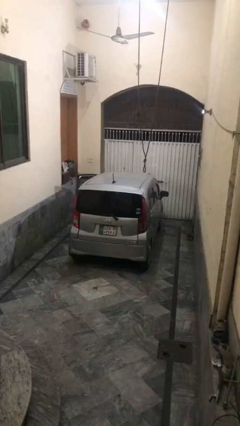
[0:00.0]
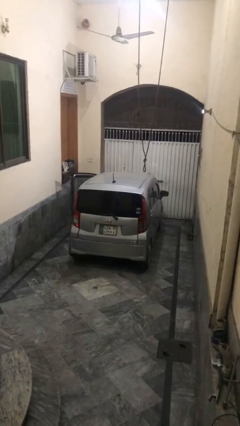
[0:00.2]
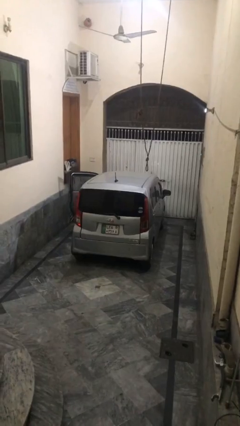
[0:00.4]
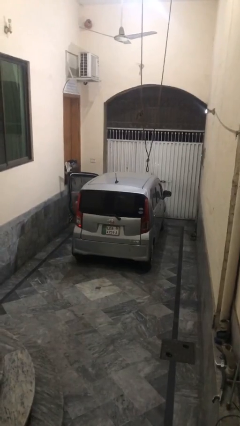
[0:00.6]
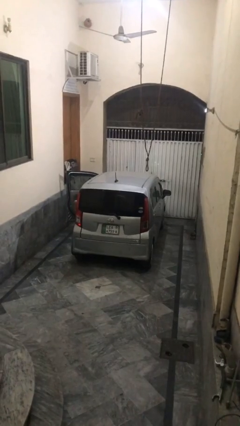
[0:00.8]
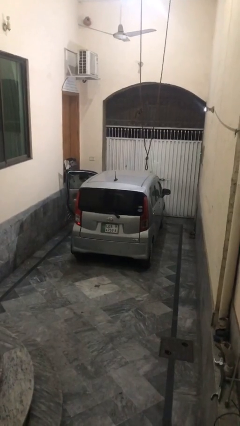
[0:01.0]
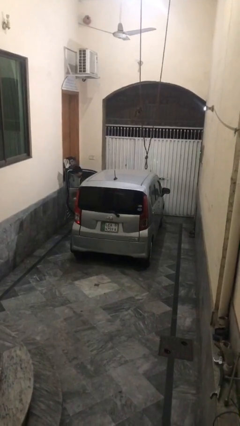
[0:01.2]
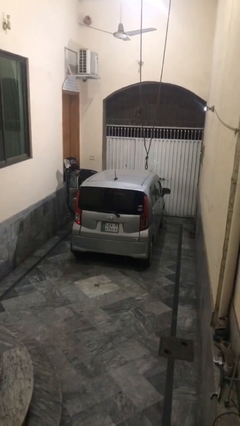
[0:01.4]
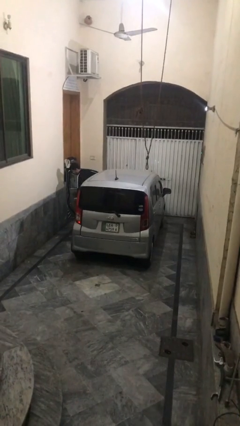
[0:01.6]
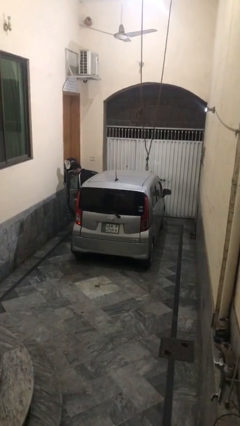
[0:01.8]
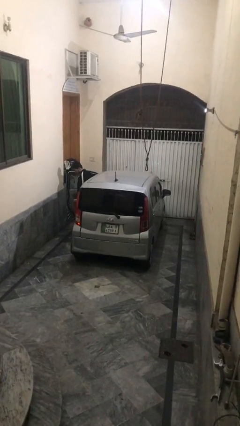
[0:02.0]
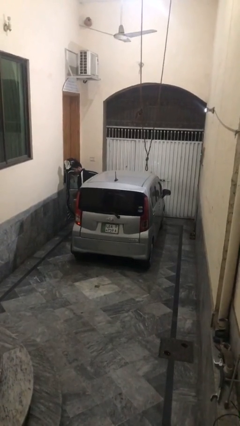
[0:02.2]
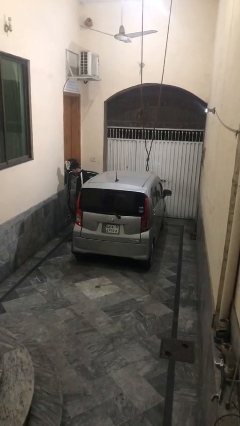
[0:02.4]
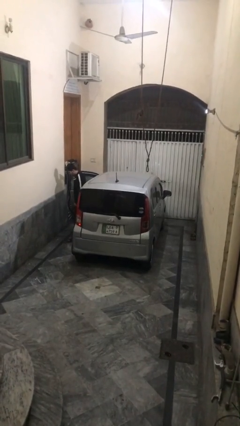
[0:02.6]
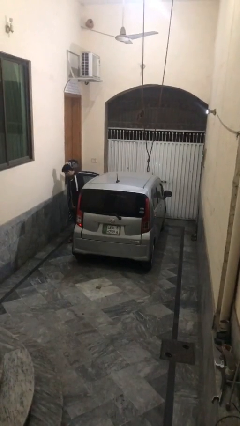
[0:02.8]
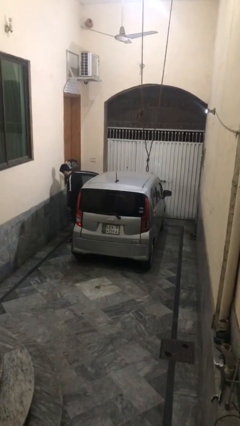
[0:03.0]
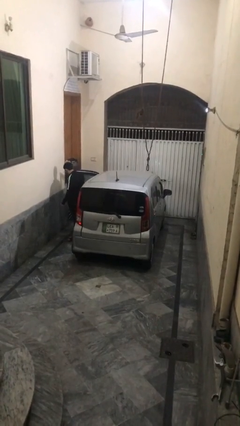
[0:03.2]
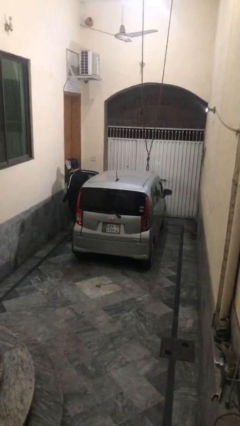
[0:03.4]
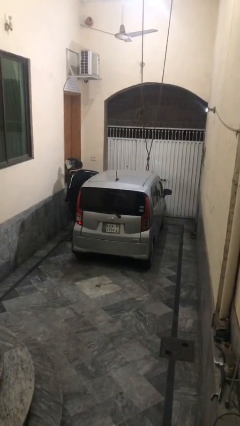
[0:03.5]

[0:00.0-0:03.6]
car drops off person

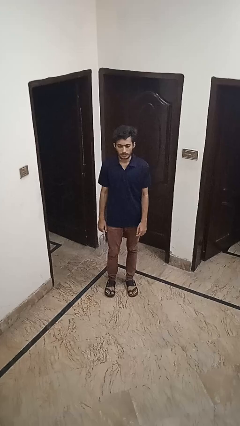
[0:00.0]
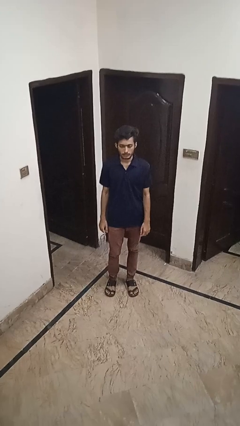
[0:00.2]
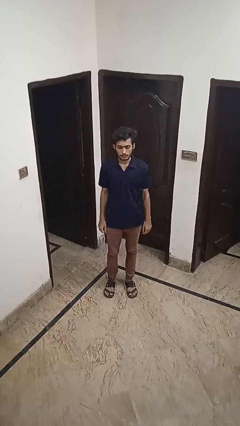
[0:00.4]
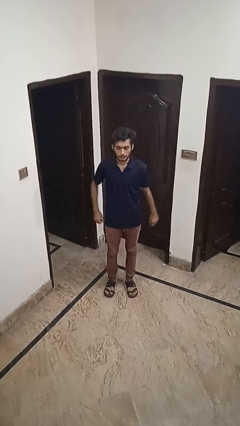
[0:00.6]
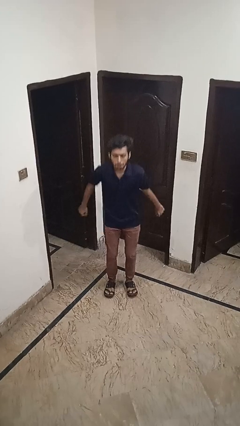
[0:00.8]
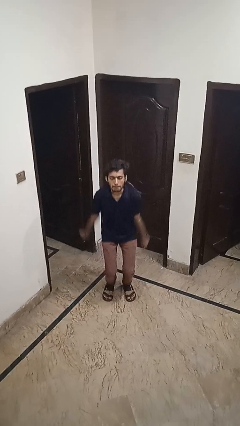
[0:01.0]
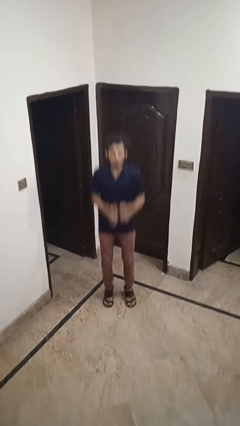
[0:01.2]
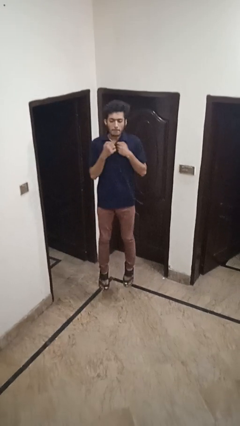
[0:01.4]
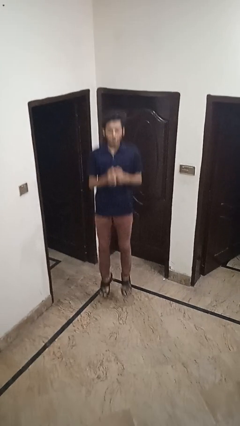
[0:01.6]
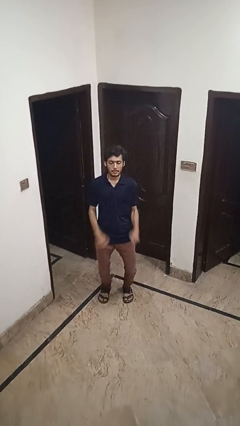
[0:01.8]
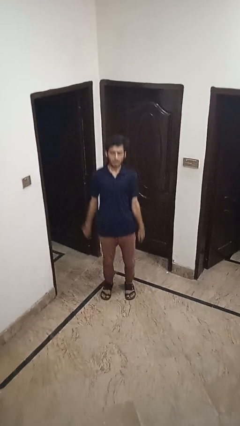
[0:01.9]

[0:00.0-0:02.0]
person jumps

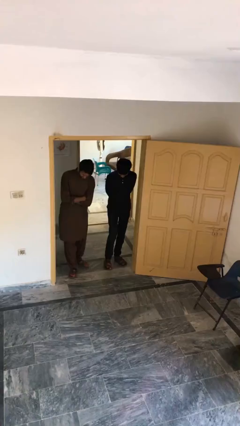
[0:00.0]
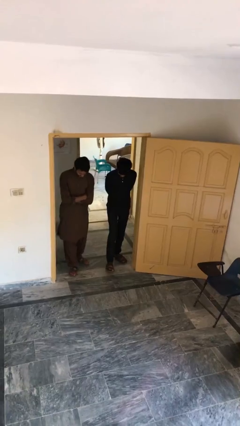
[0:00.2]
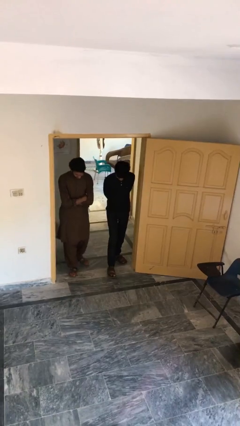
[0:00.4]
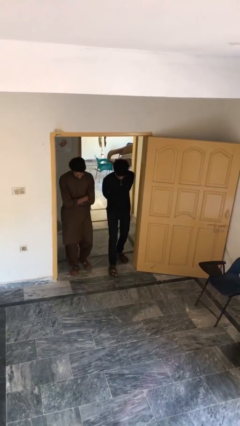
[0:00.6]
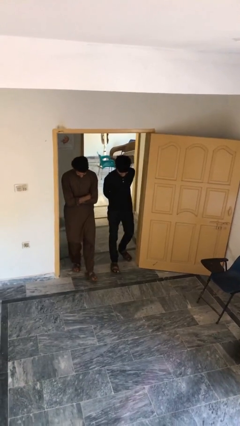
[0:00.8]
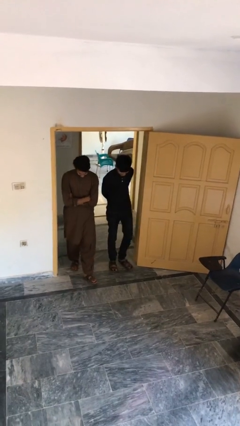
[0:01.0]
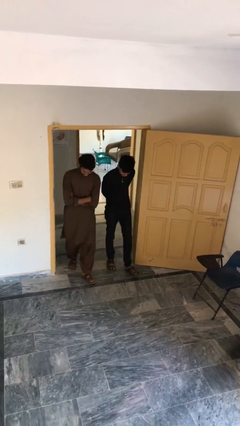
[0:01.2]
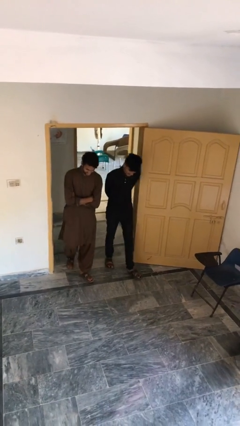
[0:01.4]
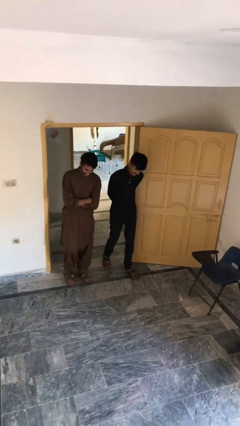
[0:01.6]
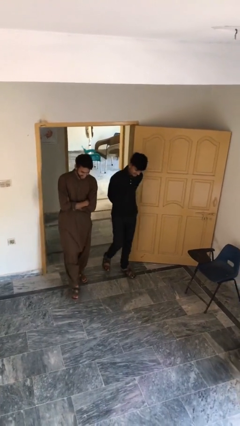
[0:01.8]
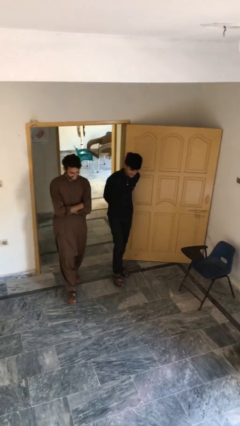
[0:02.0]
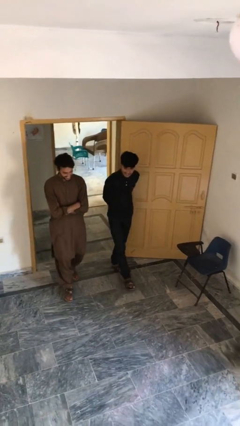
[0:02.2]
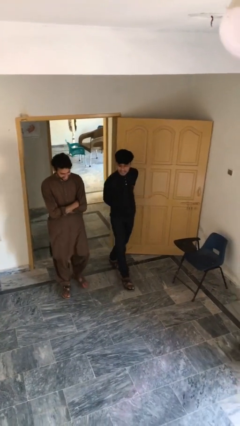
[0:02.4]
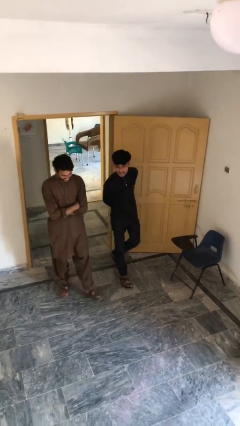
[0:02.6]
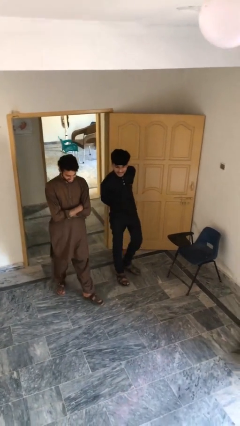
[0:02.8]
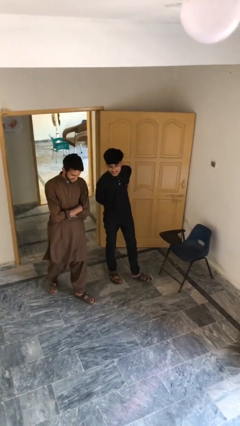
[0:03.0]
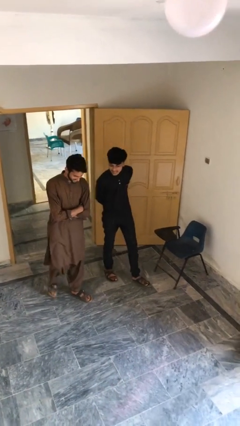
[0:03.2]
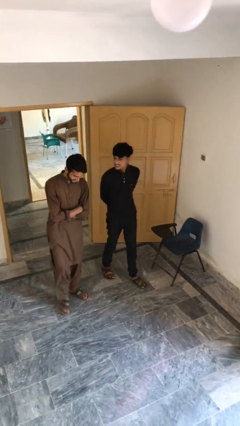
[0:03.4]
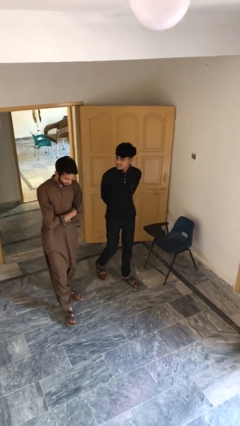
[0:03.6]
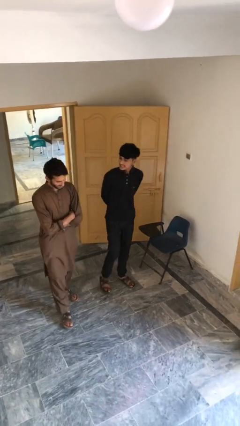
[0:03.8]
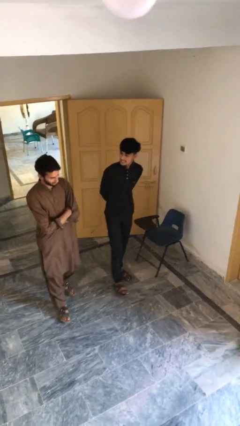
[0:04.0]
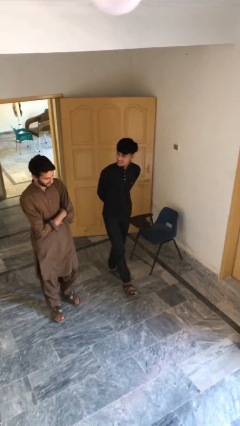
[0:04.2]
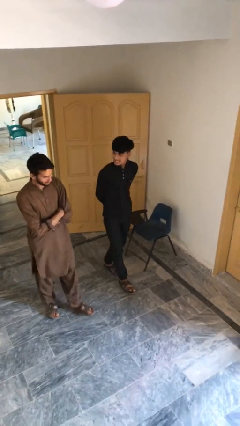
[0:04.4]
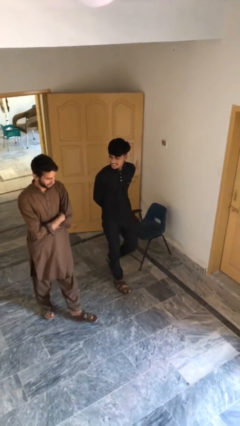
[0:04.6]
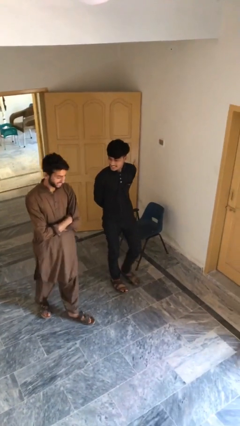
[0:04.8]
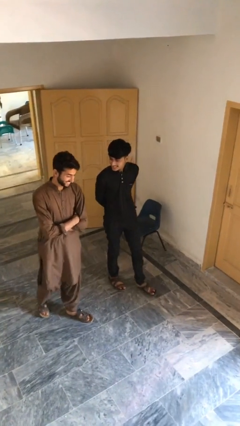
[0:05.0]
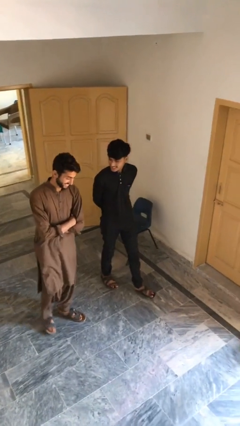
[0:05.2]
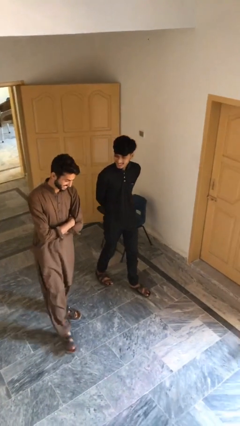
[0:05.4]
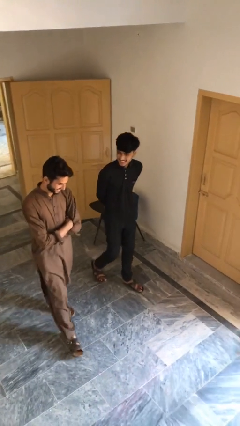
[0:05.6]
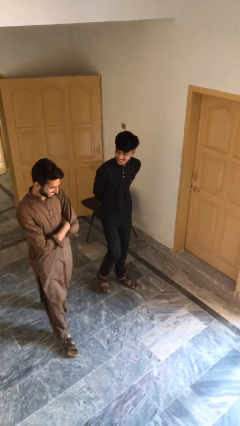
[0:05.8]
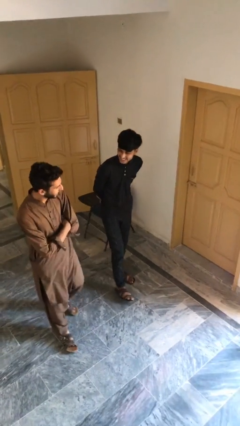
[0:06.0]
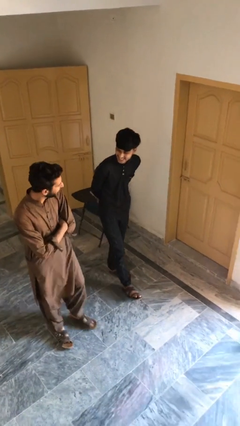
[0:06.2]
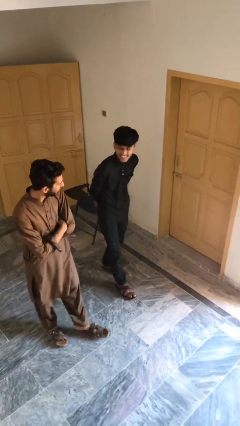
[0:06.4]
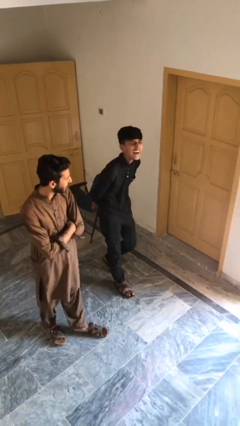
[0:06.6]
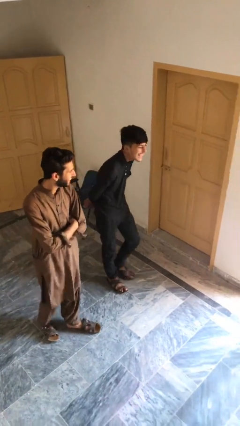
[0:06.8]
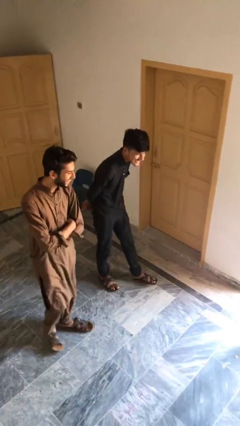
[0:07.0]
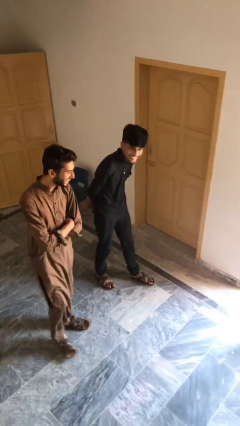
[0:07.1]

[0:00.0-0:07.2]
person talks to person

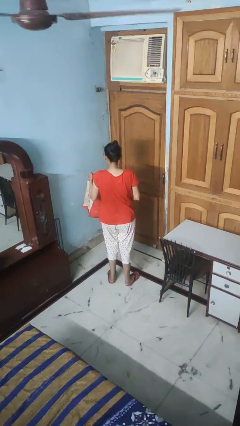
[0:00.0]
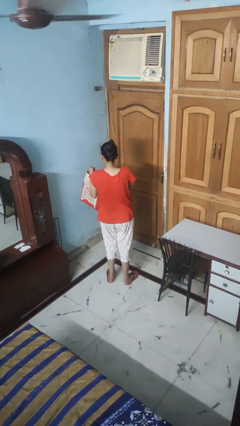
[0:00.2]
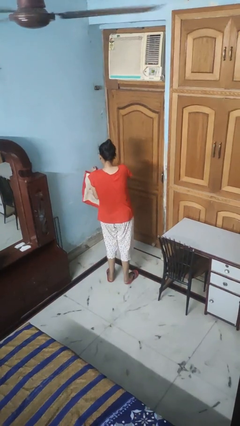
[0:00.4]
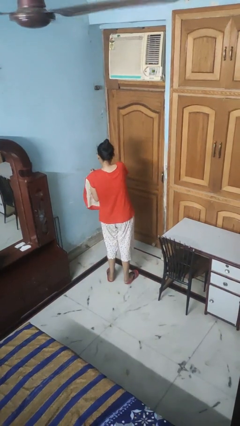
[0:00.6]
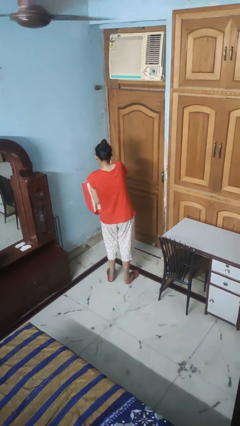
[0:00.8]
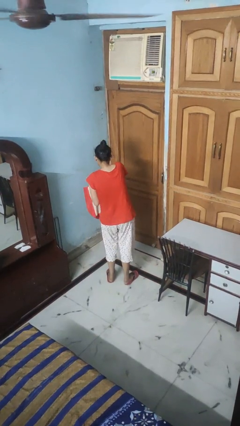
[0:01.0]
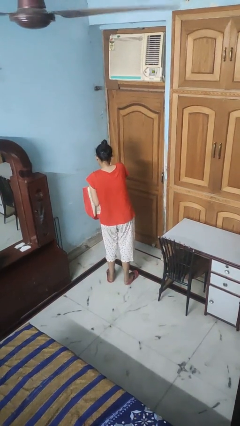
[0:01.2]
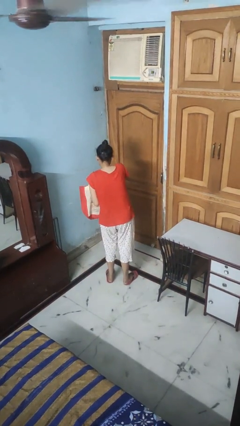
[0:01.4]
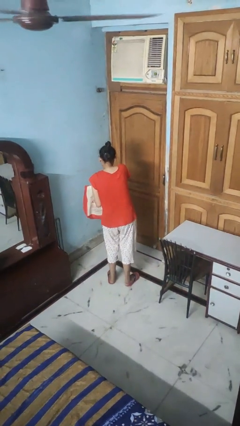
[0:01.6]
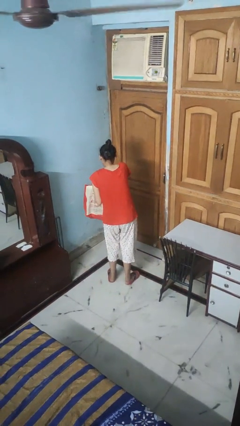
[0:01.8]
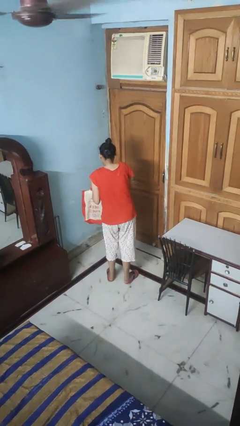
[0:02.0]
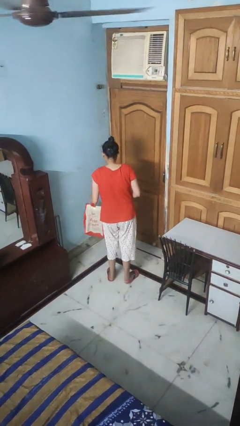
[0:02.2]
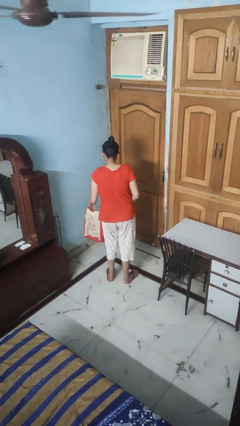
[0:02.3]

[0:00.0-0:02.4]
person searches in bag

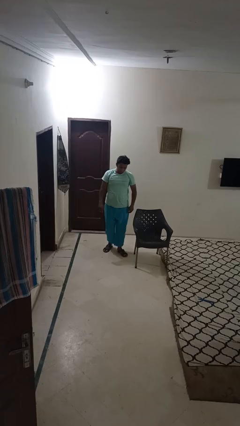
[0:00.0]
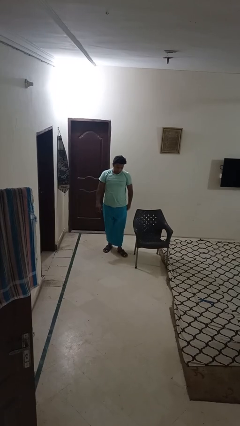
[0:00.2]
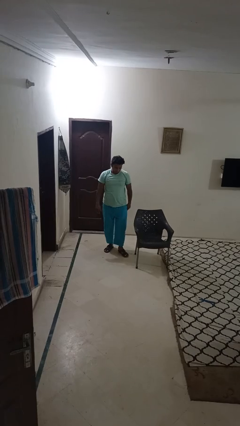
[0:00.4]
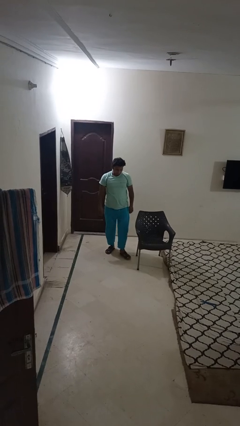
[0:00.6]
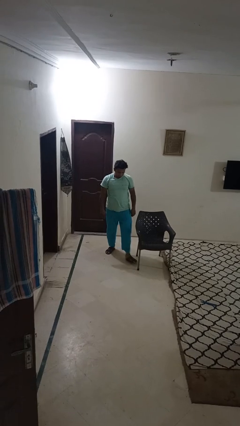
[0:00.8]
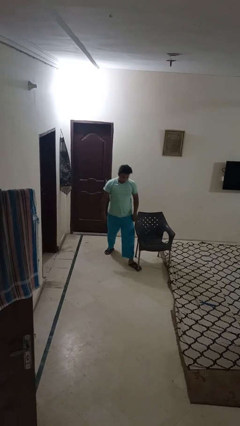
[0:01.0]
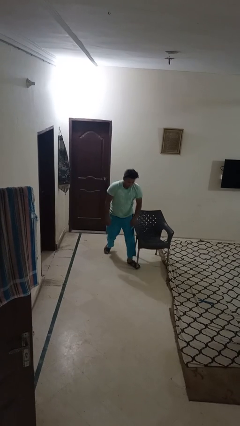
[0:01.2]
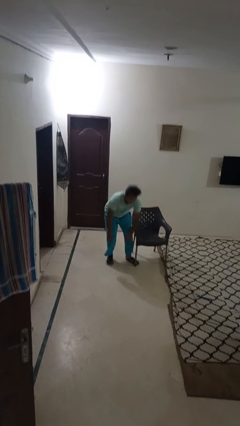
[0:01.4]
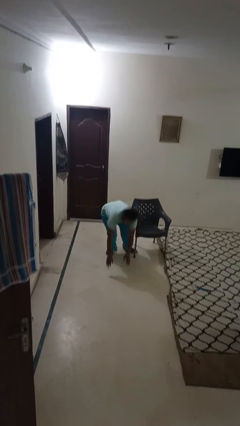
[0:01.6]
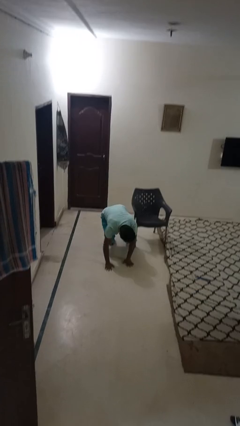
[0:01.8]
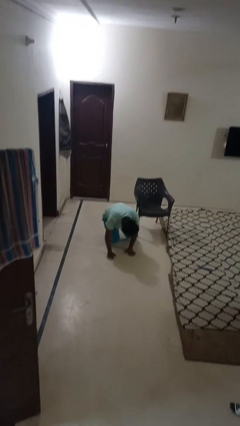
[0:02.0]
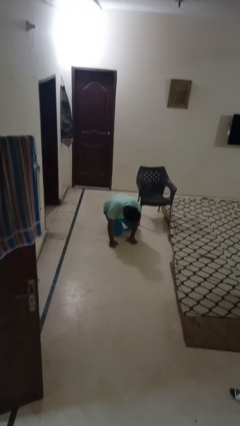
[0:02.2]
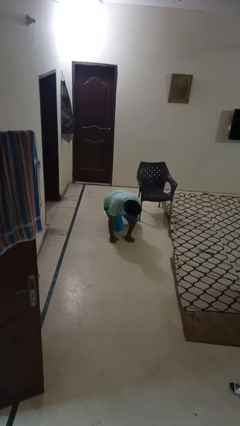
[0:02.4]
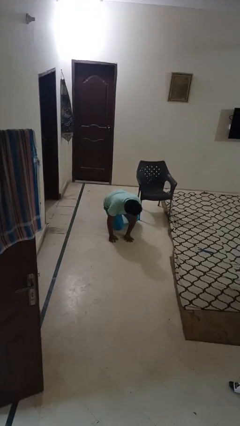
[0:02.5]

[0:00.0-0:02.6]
person trips on object on floor
